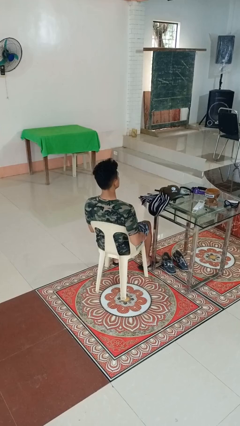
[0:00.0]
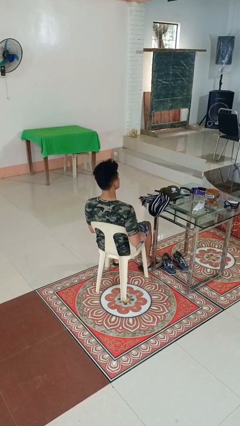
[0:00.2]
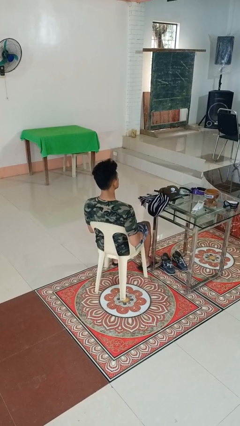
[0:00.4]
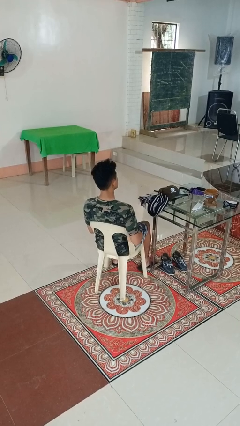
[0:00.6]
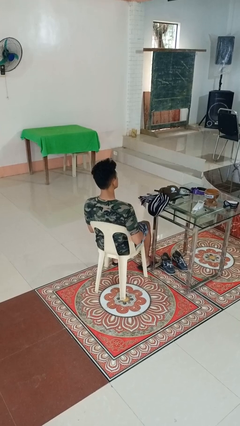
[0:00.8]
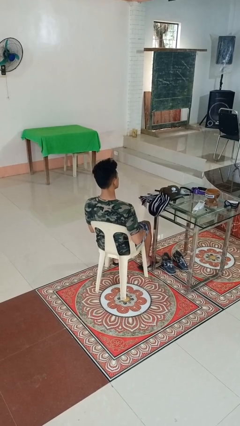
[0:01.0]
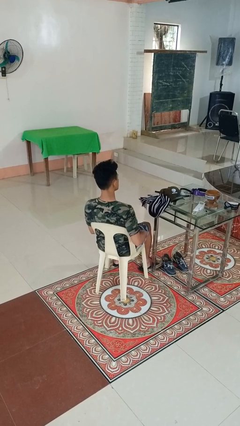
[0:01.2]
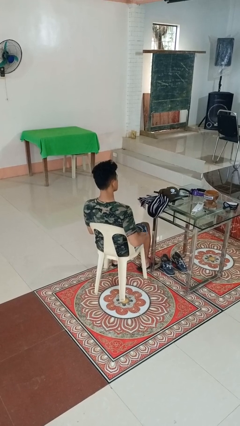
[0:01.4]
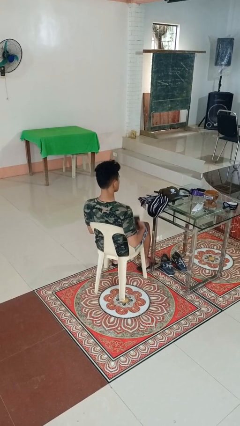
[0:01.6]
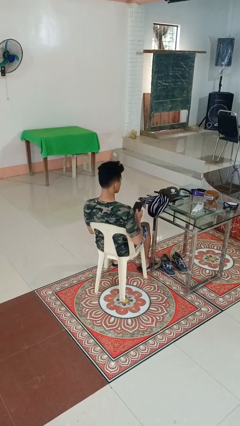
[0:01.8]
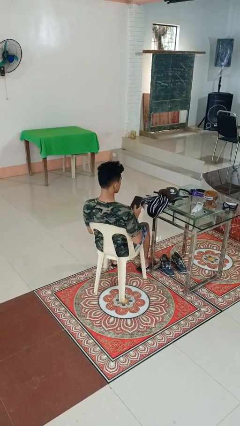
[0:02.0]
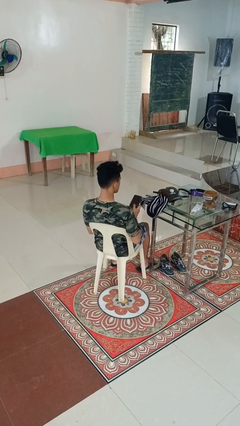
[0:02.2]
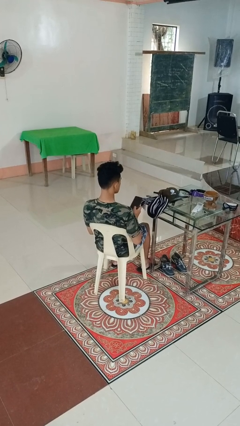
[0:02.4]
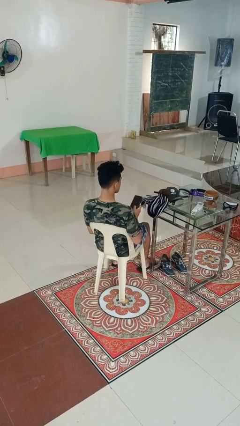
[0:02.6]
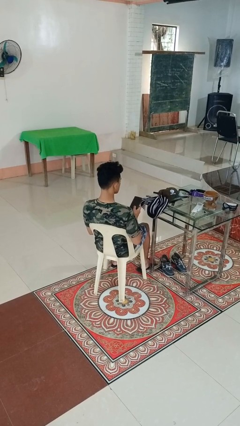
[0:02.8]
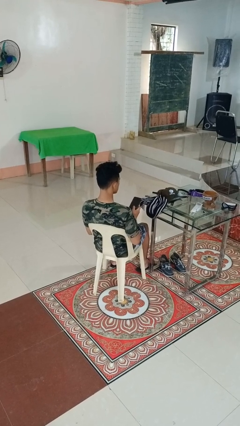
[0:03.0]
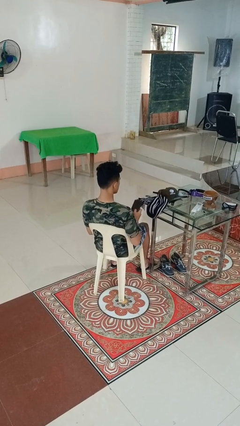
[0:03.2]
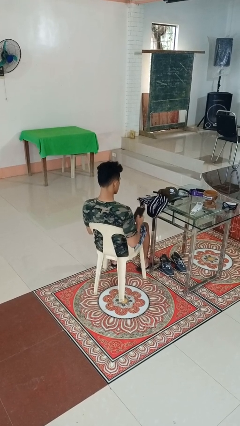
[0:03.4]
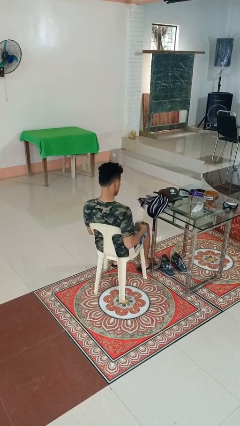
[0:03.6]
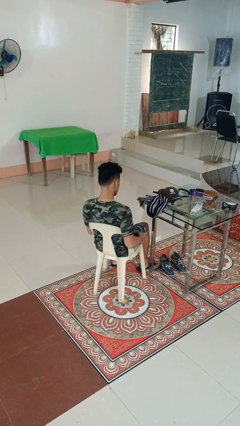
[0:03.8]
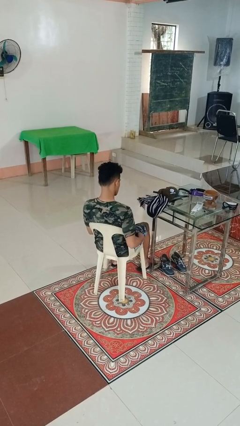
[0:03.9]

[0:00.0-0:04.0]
person takes phone from pocket

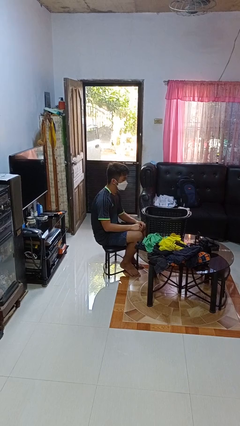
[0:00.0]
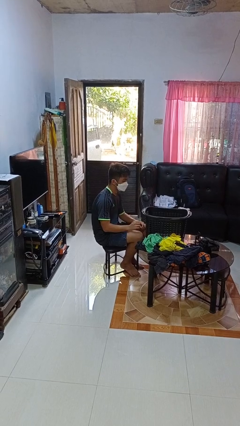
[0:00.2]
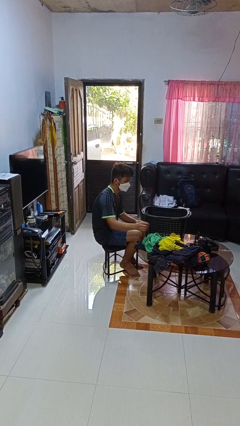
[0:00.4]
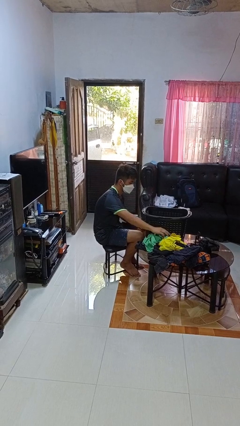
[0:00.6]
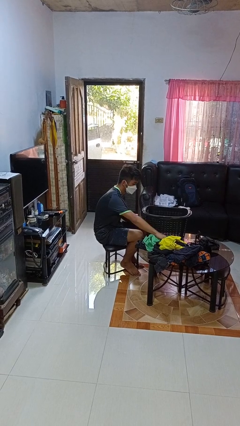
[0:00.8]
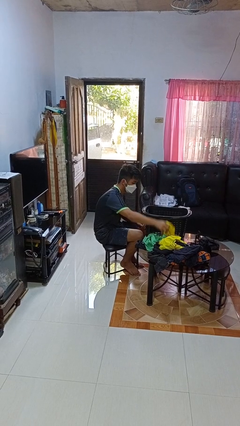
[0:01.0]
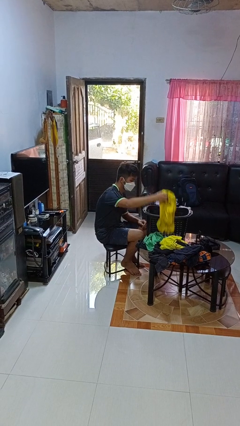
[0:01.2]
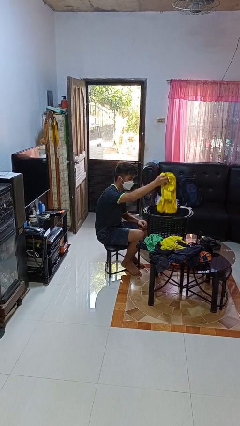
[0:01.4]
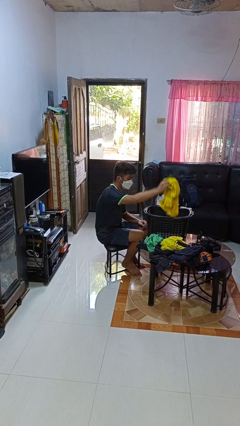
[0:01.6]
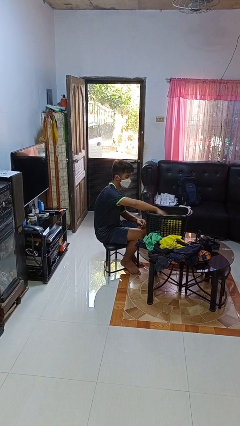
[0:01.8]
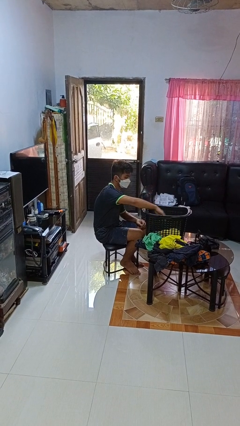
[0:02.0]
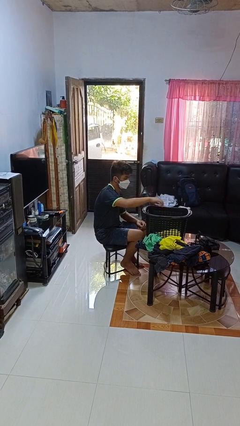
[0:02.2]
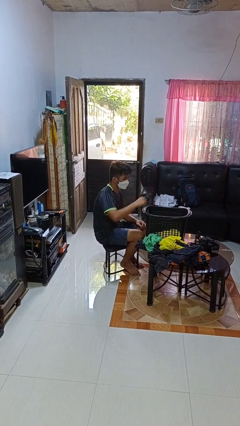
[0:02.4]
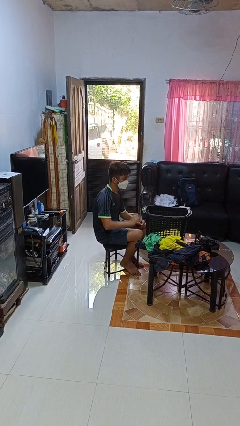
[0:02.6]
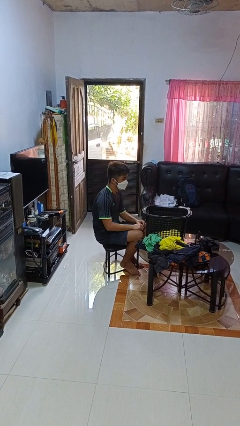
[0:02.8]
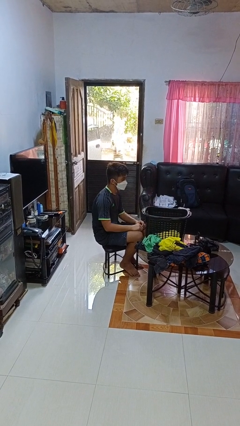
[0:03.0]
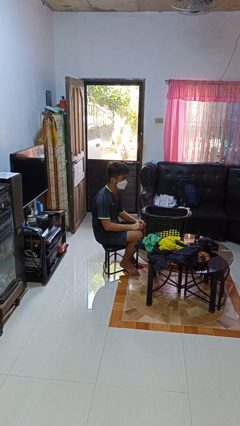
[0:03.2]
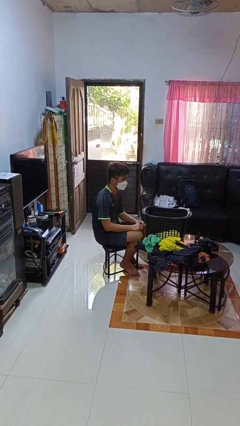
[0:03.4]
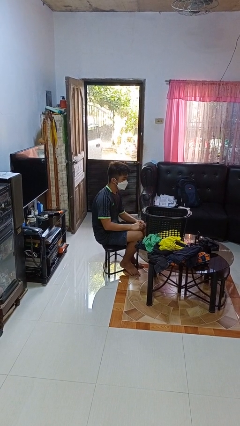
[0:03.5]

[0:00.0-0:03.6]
person puts object into basket

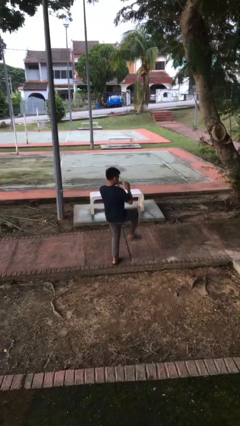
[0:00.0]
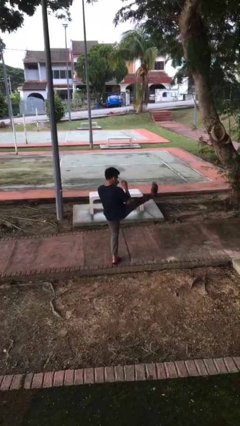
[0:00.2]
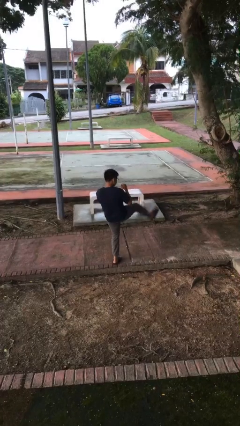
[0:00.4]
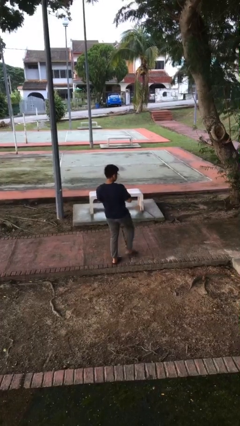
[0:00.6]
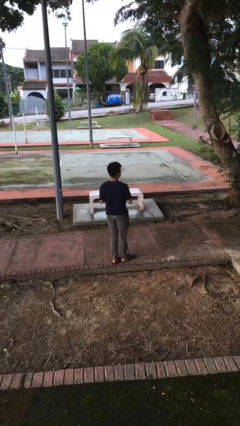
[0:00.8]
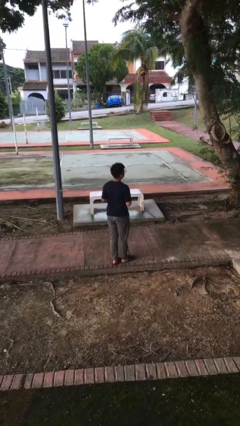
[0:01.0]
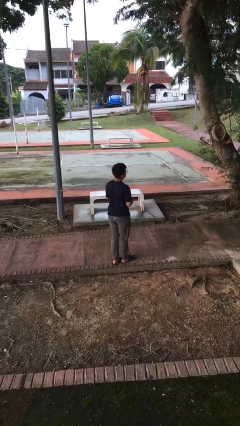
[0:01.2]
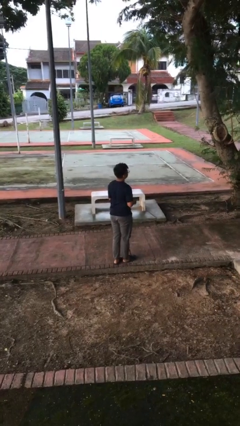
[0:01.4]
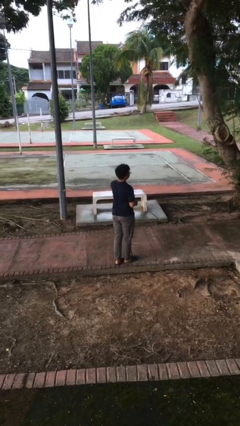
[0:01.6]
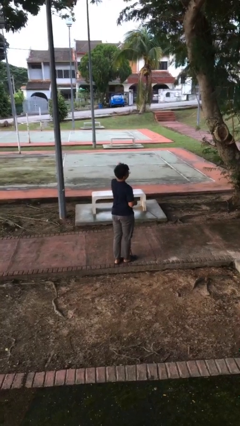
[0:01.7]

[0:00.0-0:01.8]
person karate kicks

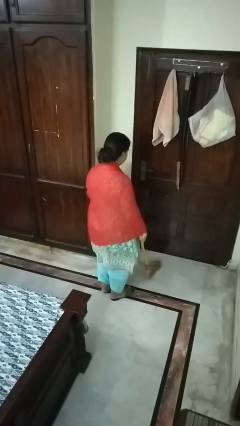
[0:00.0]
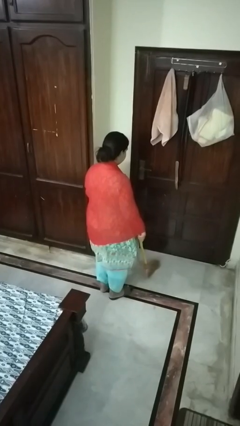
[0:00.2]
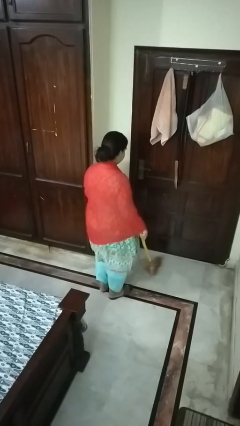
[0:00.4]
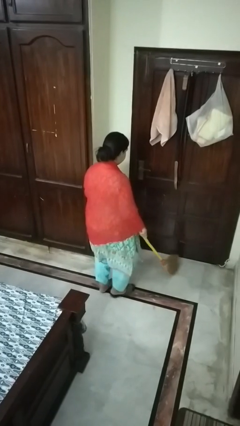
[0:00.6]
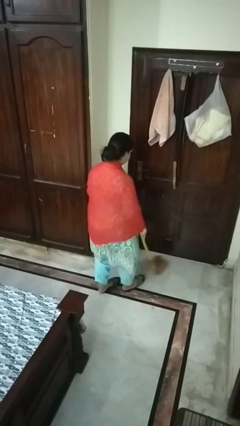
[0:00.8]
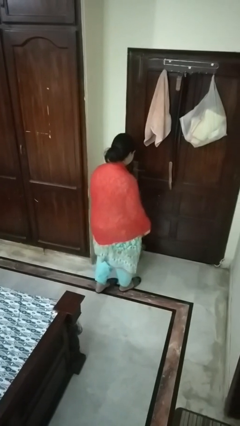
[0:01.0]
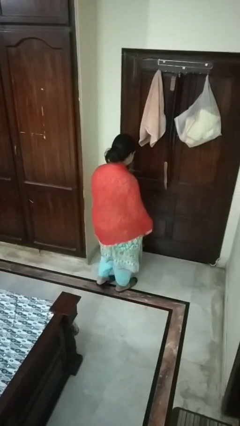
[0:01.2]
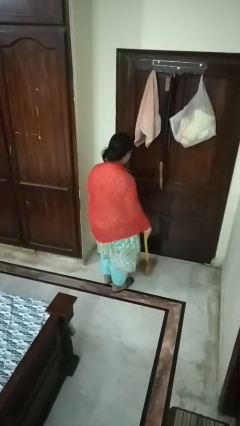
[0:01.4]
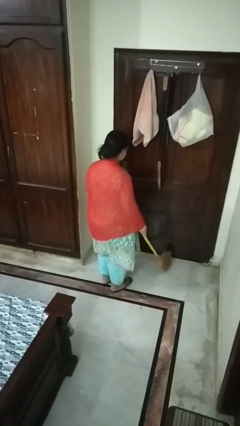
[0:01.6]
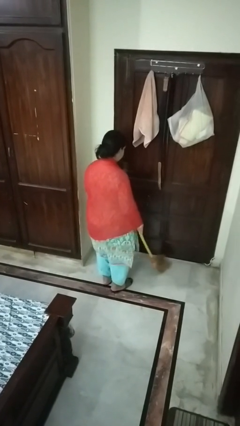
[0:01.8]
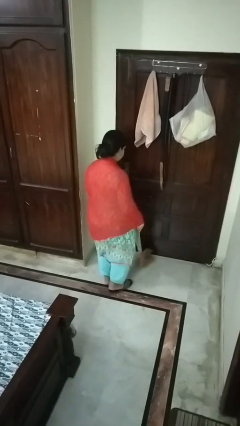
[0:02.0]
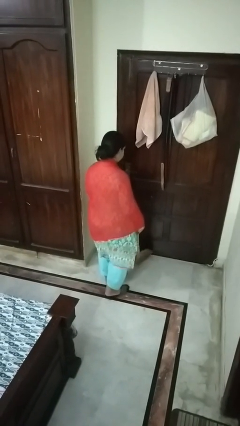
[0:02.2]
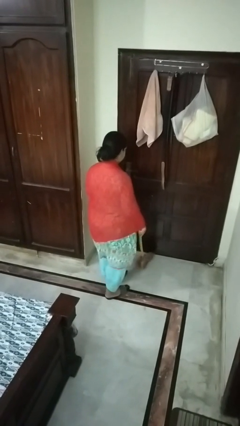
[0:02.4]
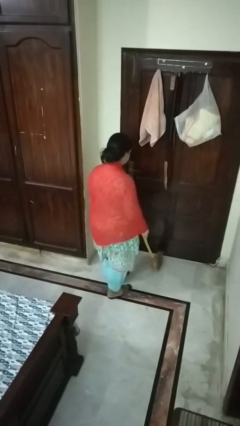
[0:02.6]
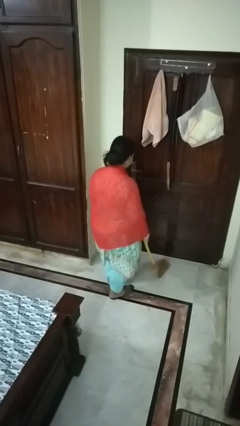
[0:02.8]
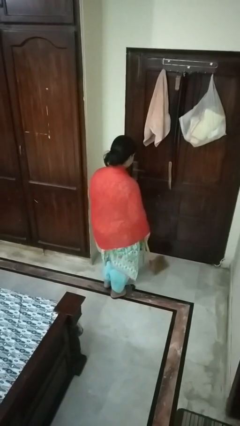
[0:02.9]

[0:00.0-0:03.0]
person sweeps floor

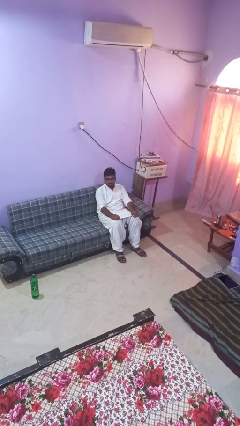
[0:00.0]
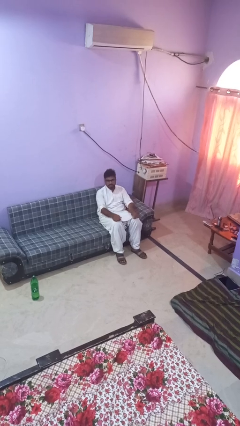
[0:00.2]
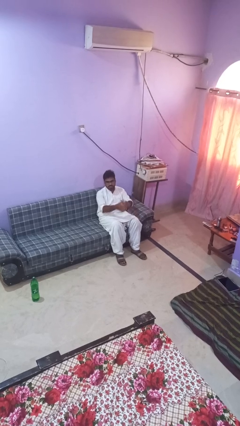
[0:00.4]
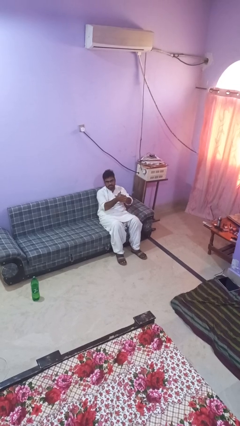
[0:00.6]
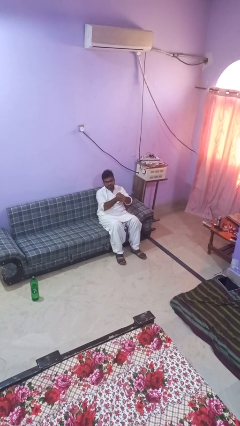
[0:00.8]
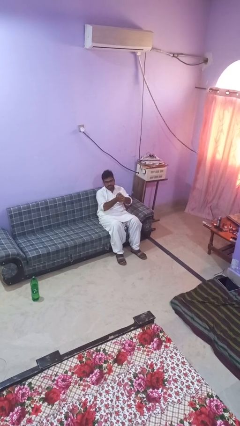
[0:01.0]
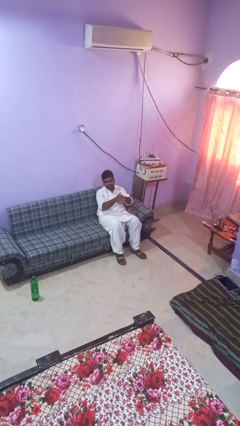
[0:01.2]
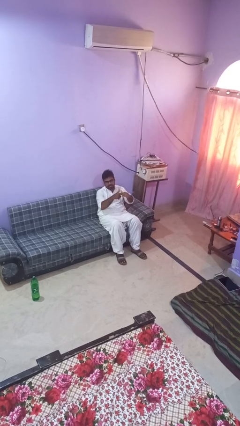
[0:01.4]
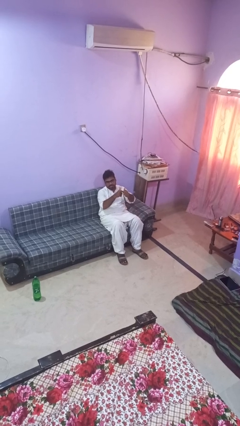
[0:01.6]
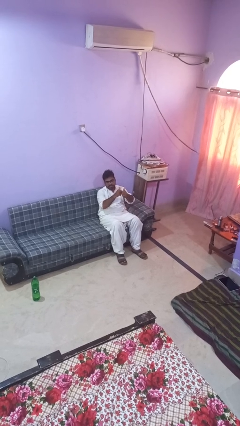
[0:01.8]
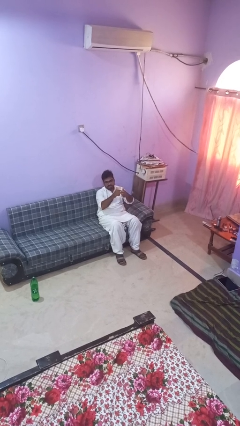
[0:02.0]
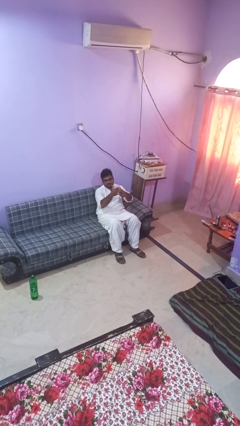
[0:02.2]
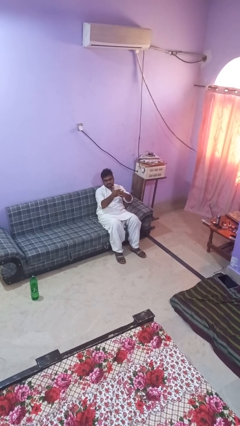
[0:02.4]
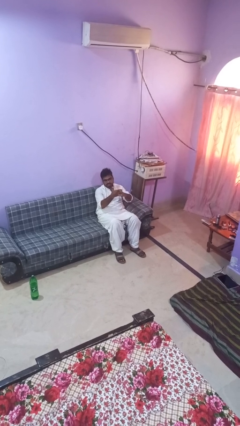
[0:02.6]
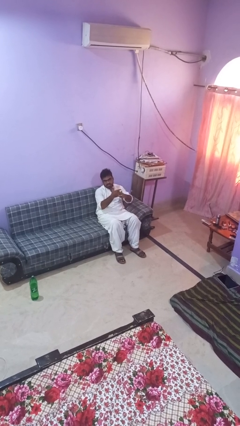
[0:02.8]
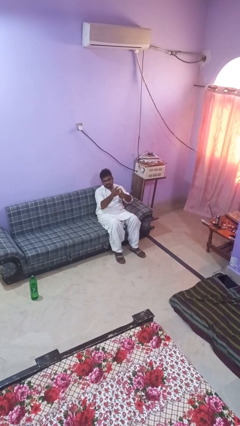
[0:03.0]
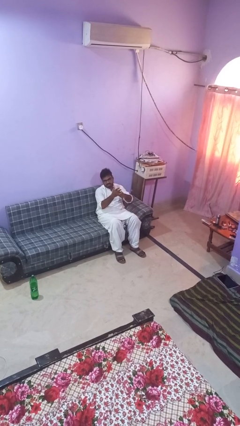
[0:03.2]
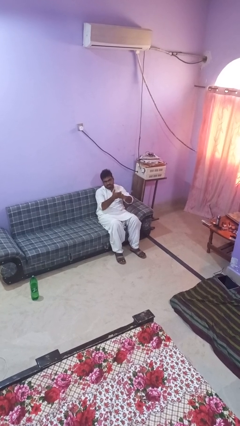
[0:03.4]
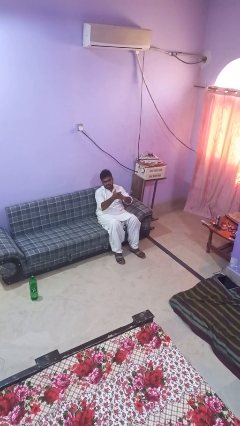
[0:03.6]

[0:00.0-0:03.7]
person cracks knuckles

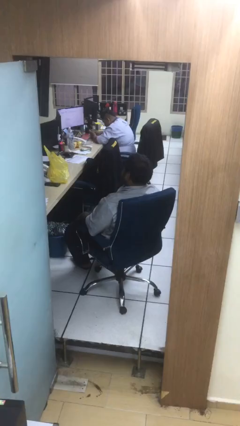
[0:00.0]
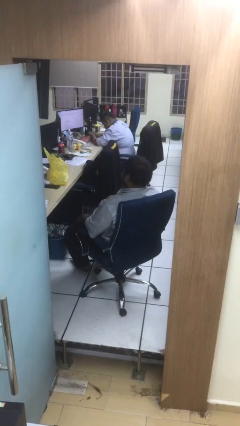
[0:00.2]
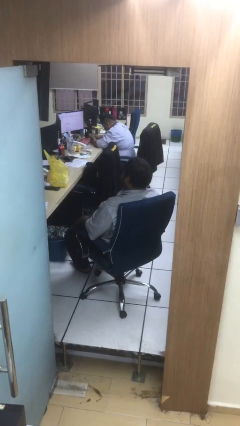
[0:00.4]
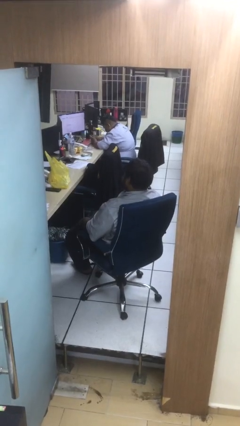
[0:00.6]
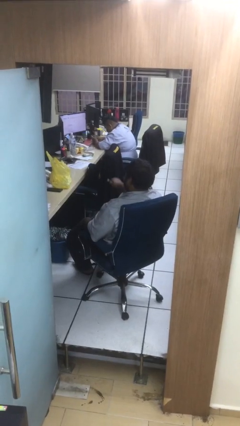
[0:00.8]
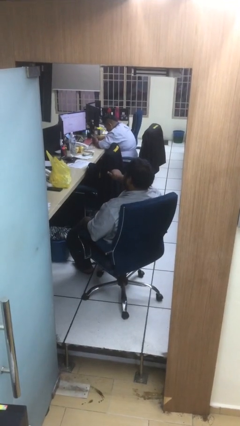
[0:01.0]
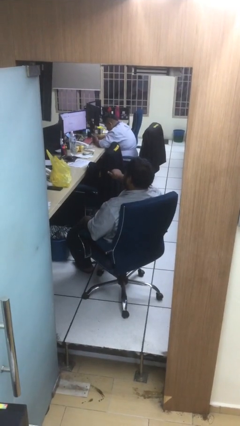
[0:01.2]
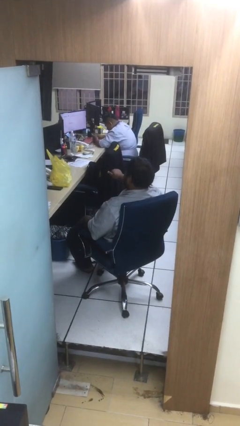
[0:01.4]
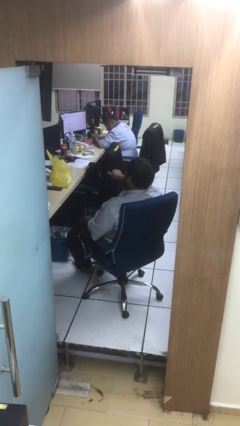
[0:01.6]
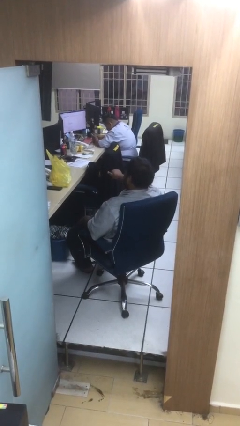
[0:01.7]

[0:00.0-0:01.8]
person gestures thumbs up
